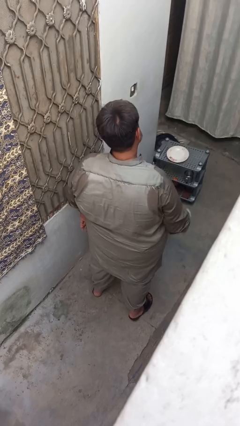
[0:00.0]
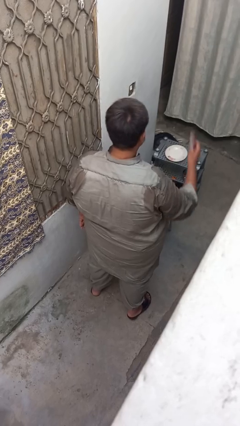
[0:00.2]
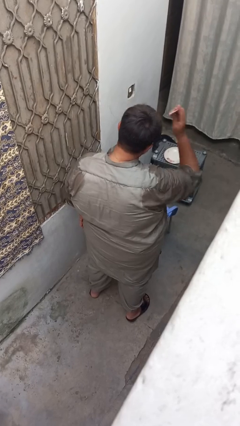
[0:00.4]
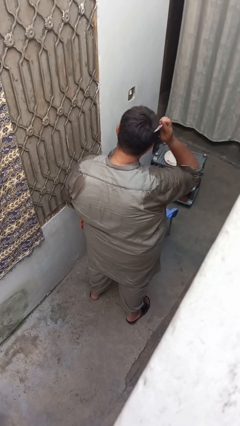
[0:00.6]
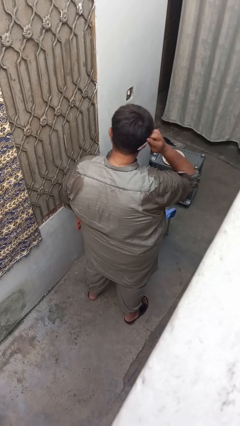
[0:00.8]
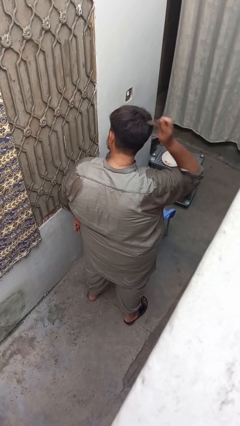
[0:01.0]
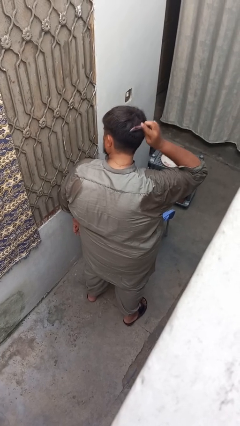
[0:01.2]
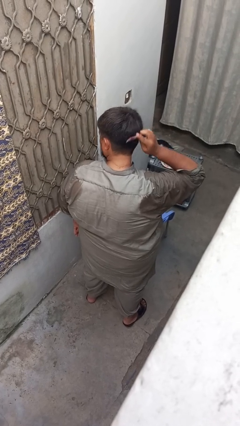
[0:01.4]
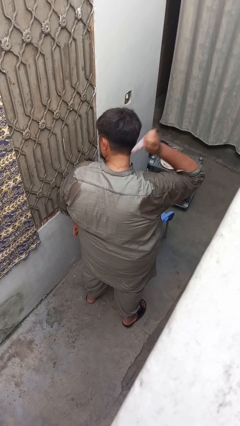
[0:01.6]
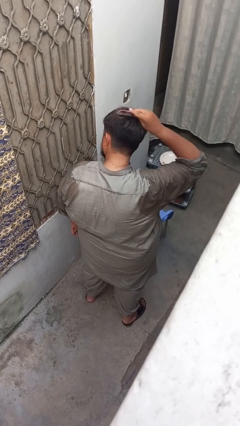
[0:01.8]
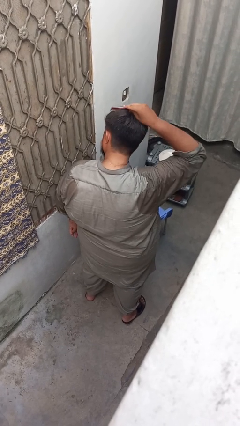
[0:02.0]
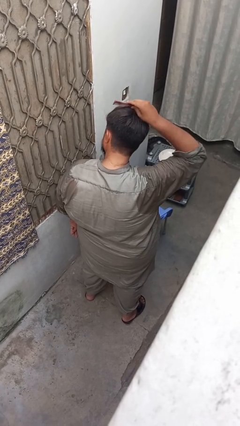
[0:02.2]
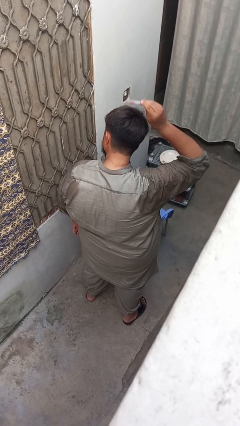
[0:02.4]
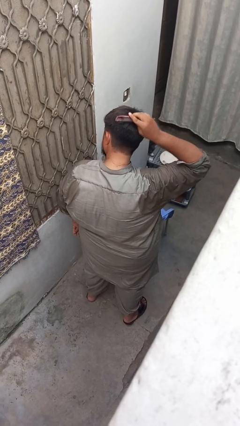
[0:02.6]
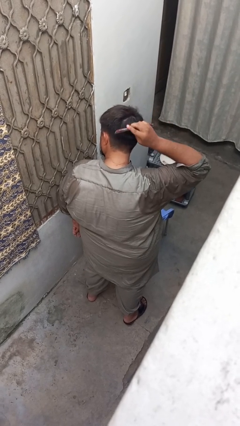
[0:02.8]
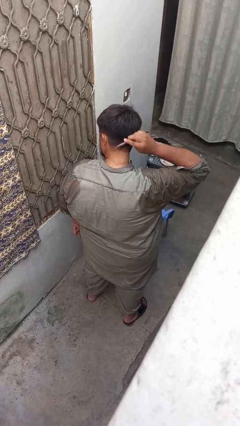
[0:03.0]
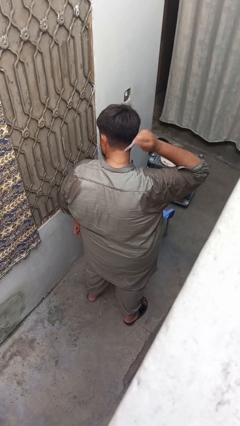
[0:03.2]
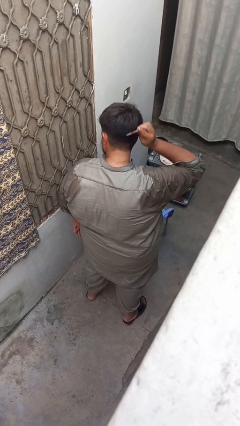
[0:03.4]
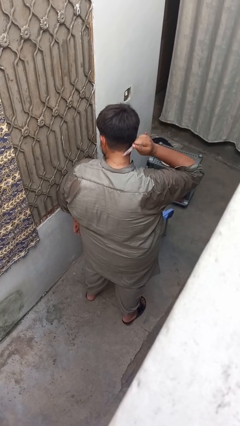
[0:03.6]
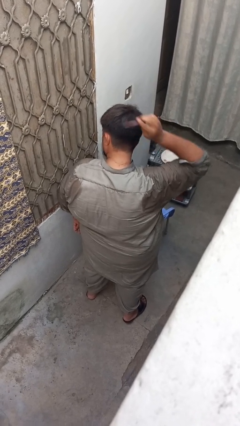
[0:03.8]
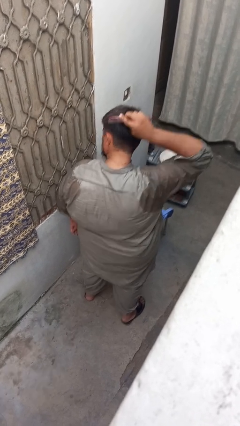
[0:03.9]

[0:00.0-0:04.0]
person brushes hair

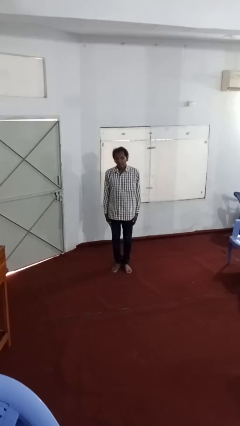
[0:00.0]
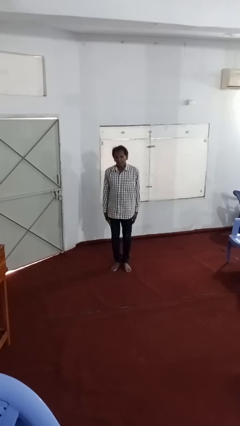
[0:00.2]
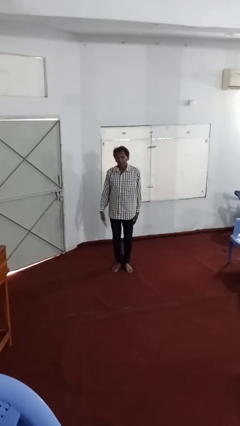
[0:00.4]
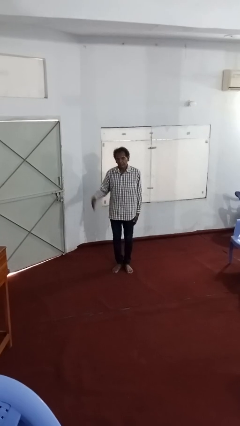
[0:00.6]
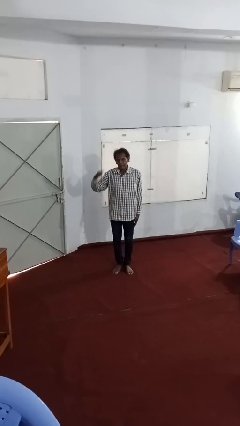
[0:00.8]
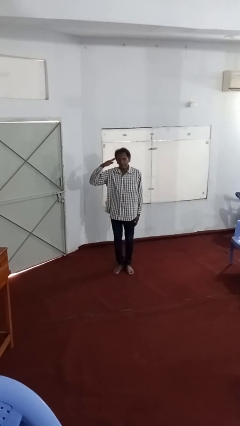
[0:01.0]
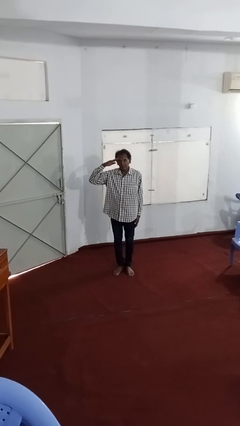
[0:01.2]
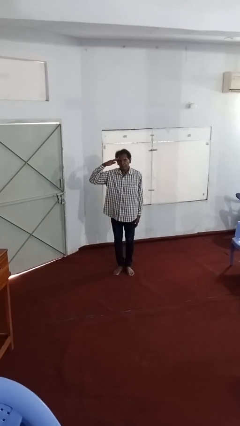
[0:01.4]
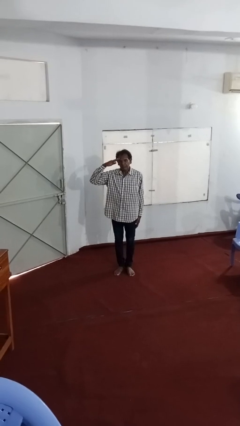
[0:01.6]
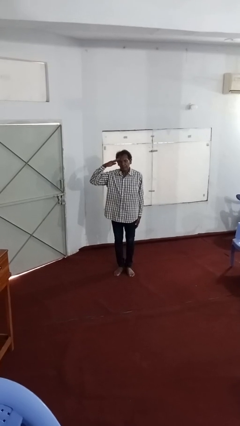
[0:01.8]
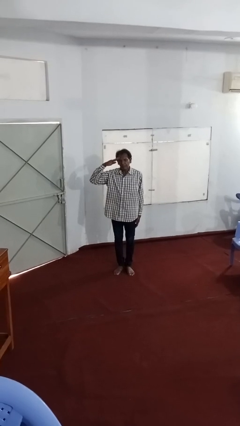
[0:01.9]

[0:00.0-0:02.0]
person salutes

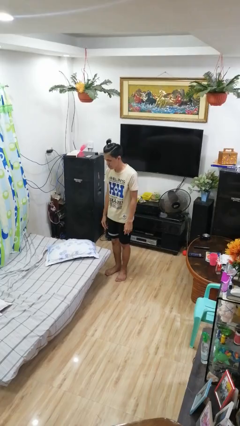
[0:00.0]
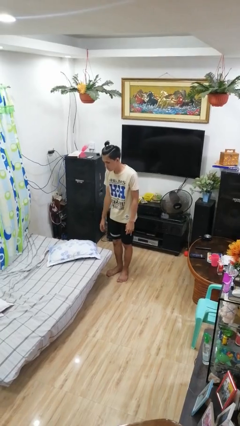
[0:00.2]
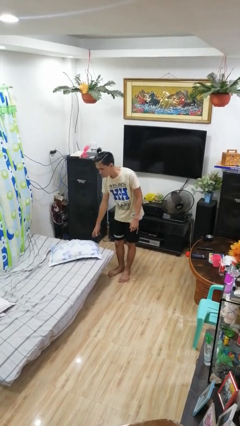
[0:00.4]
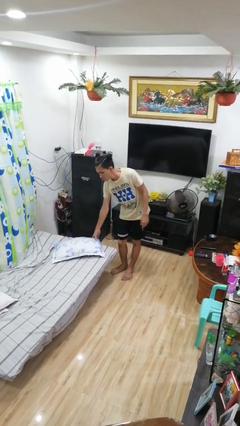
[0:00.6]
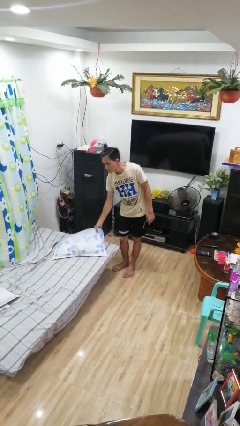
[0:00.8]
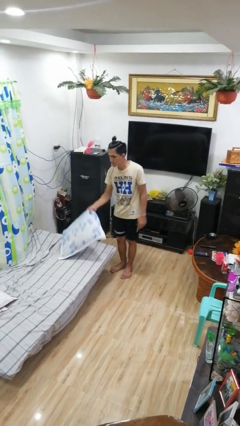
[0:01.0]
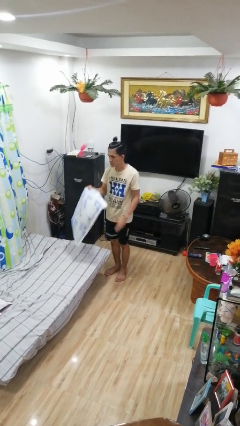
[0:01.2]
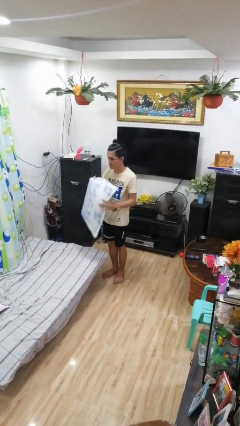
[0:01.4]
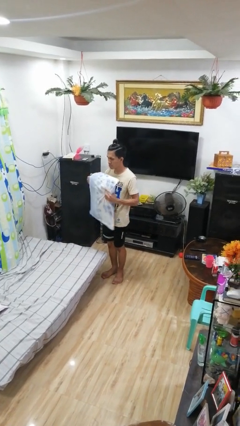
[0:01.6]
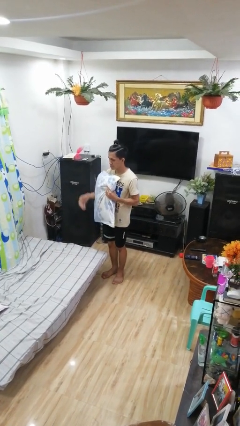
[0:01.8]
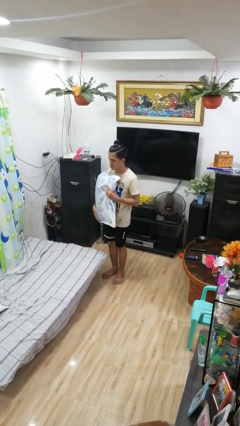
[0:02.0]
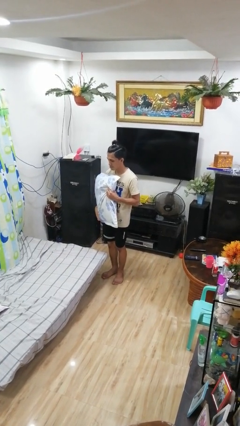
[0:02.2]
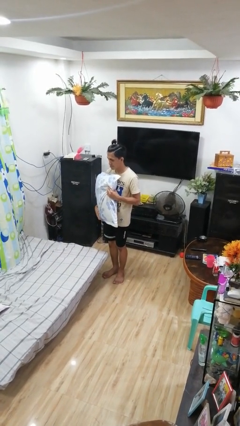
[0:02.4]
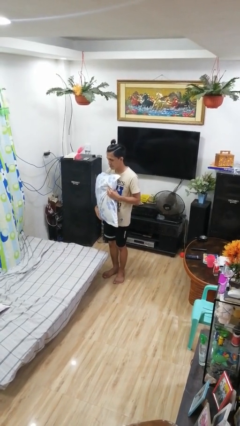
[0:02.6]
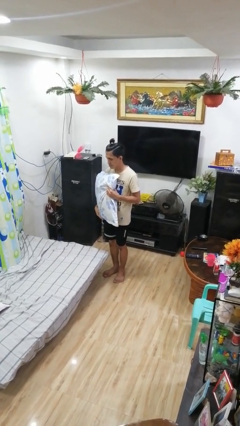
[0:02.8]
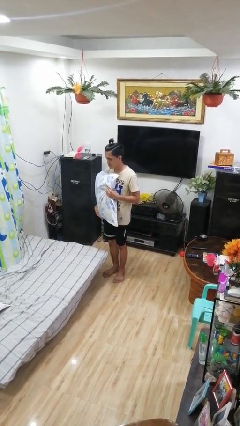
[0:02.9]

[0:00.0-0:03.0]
person picks up object from bed

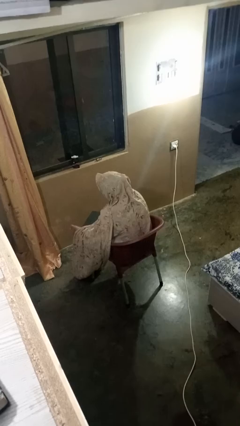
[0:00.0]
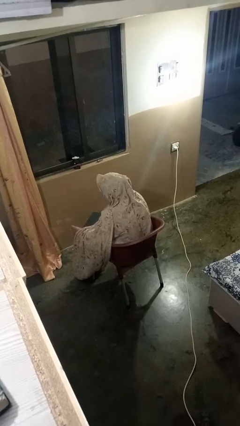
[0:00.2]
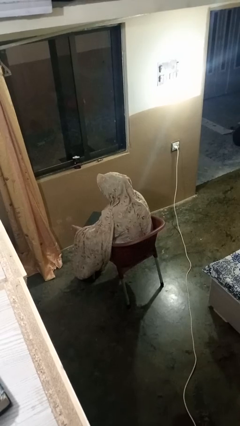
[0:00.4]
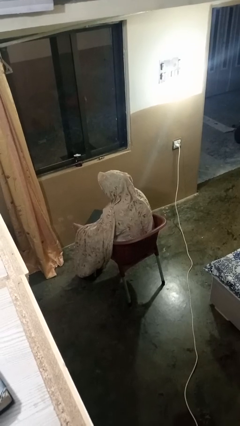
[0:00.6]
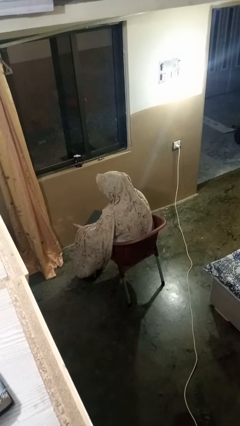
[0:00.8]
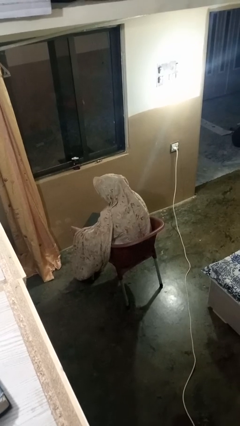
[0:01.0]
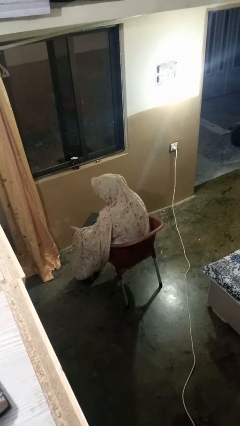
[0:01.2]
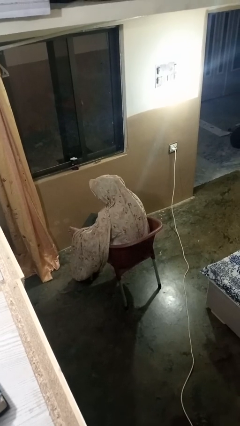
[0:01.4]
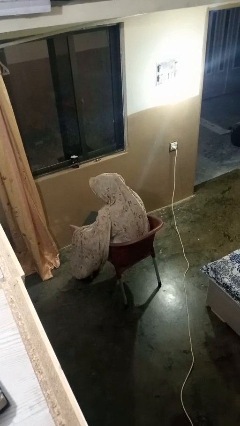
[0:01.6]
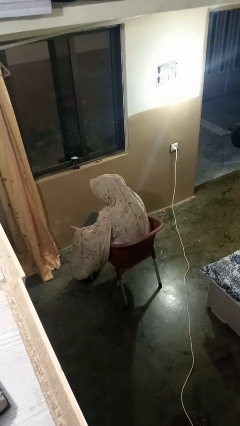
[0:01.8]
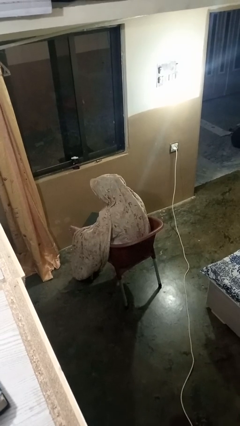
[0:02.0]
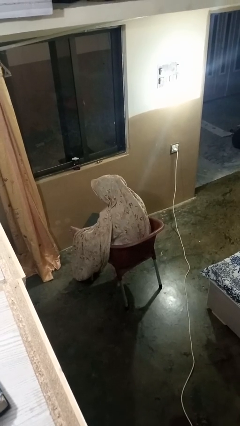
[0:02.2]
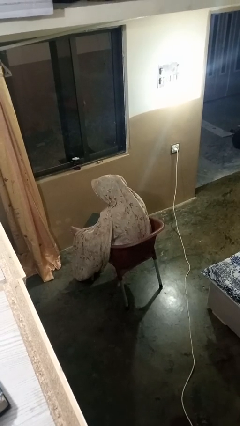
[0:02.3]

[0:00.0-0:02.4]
person interacts with tablet

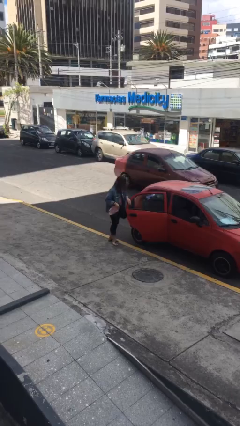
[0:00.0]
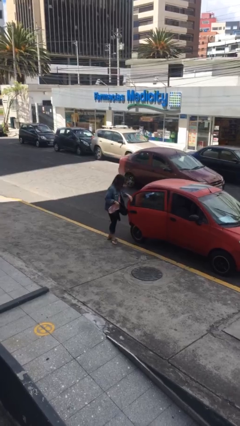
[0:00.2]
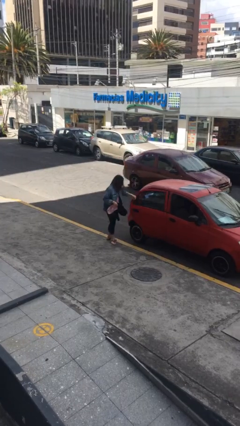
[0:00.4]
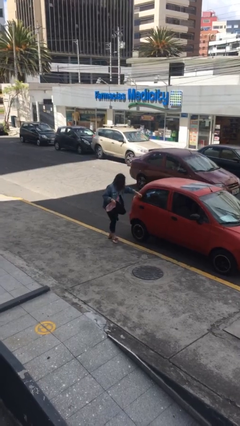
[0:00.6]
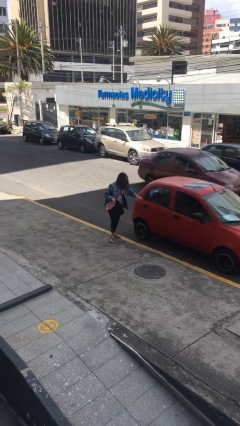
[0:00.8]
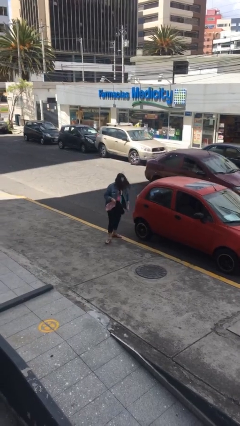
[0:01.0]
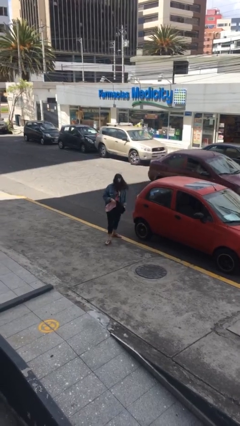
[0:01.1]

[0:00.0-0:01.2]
person closes car door

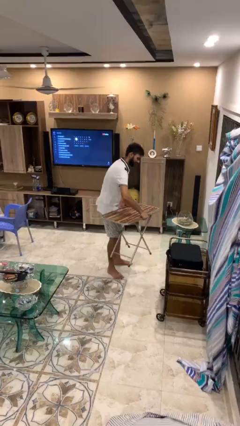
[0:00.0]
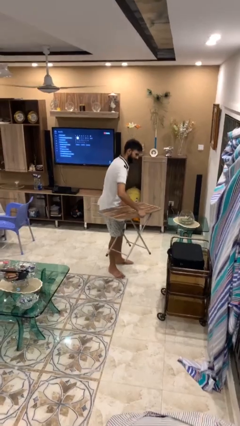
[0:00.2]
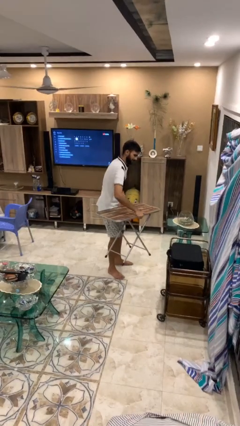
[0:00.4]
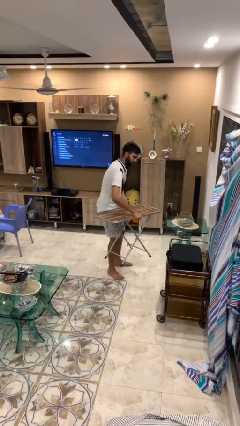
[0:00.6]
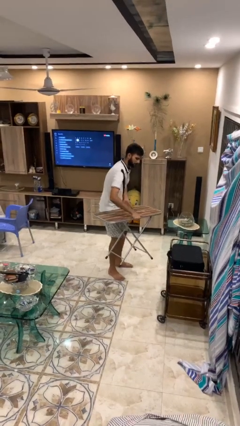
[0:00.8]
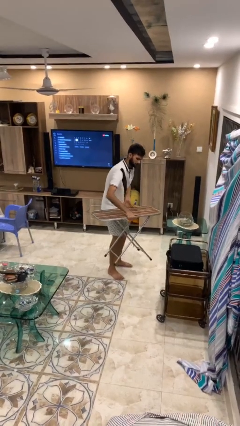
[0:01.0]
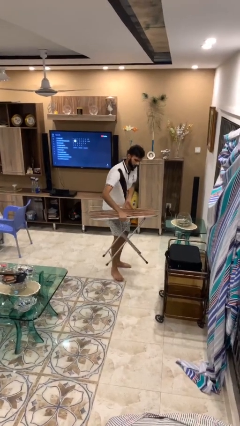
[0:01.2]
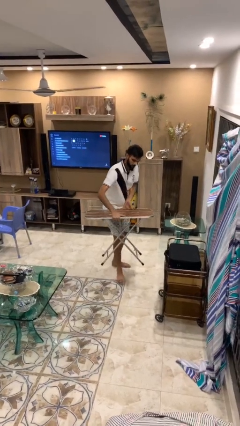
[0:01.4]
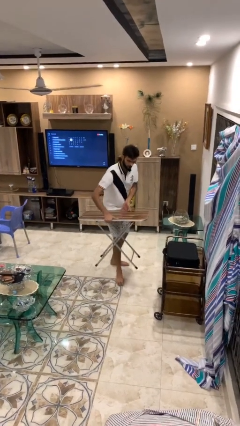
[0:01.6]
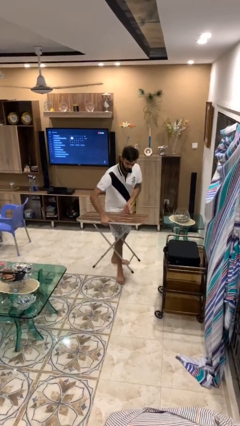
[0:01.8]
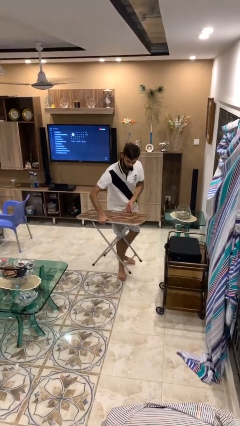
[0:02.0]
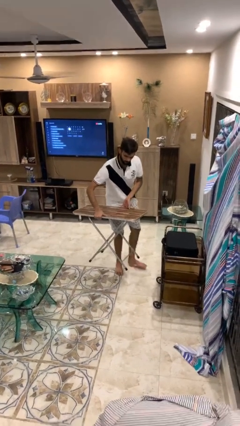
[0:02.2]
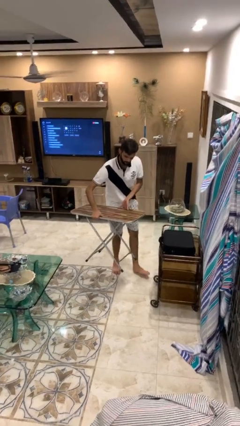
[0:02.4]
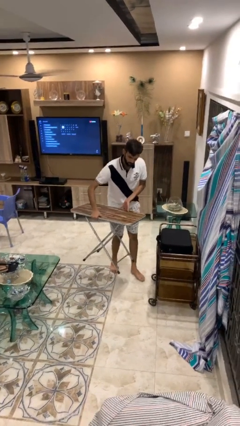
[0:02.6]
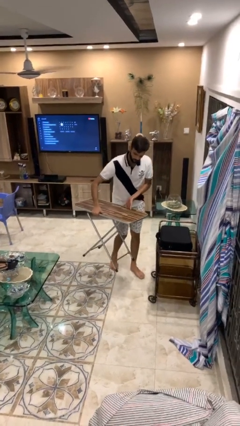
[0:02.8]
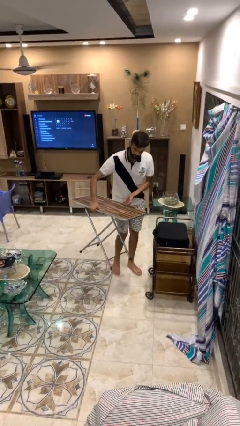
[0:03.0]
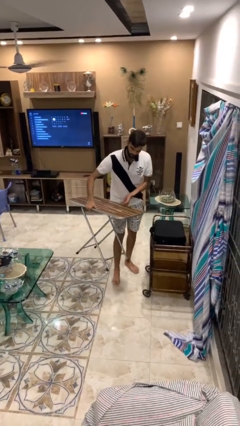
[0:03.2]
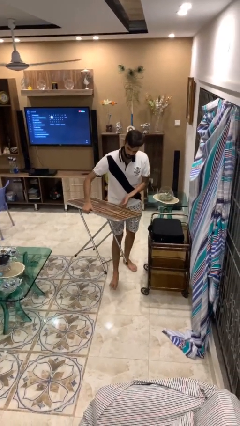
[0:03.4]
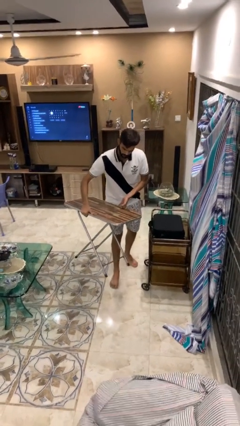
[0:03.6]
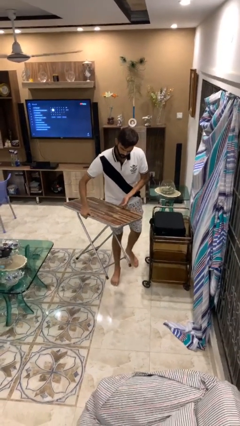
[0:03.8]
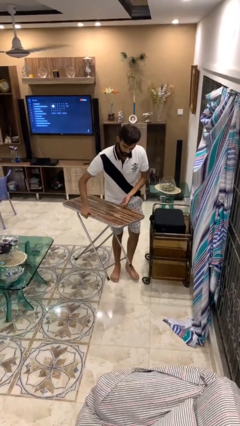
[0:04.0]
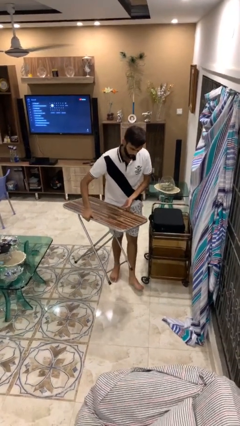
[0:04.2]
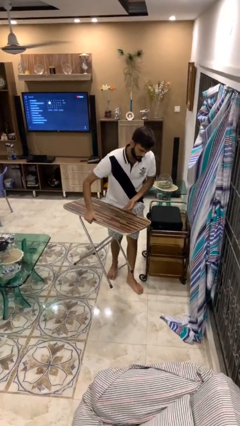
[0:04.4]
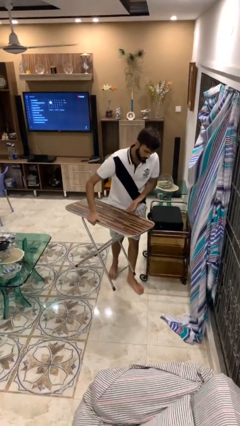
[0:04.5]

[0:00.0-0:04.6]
person carries heavy object
